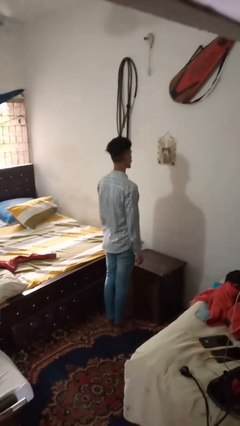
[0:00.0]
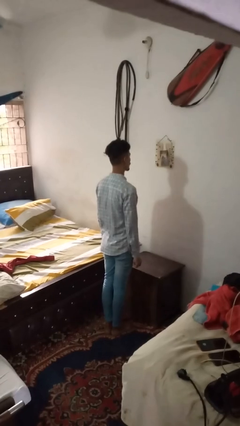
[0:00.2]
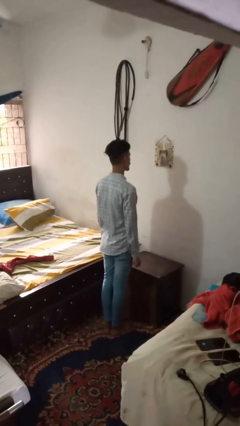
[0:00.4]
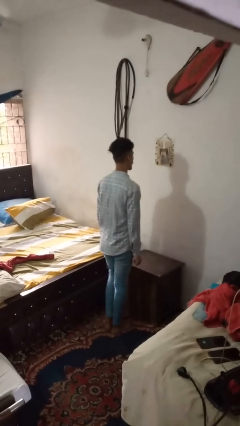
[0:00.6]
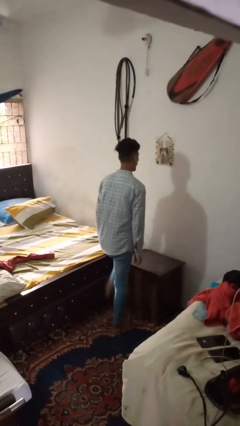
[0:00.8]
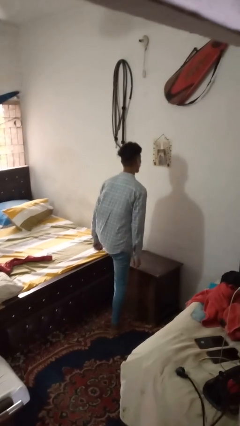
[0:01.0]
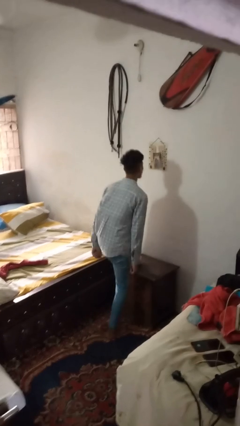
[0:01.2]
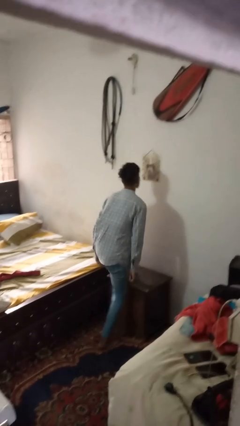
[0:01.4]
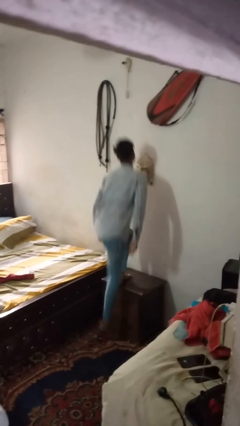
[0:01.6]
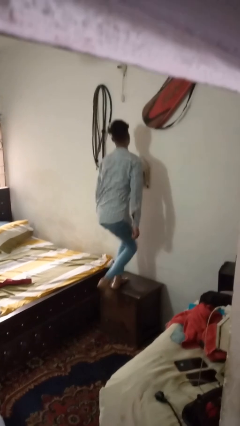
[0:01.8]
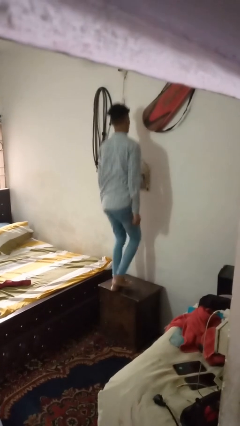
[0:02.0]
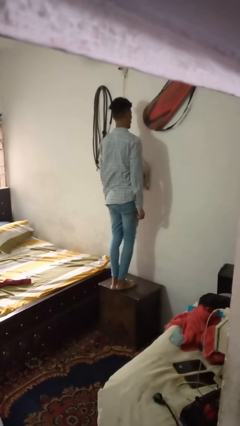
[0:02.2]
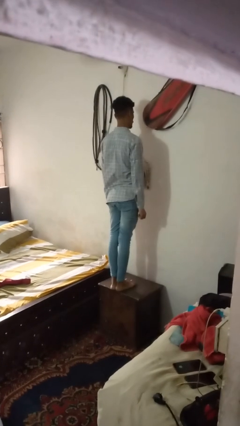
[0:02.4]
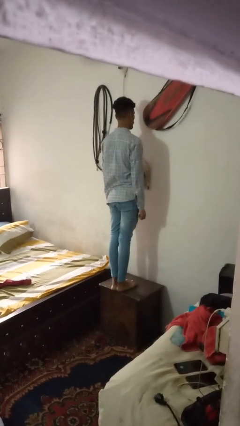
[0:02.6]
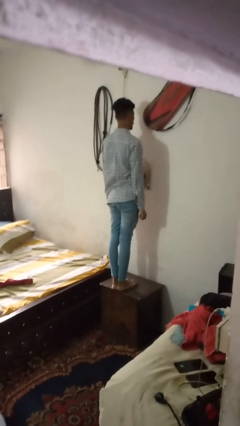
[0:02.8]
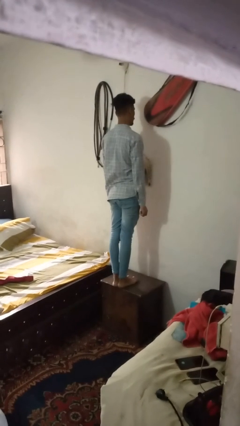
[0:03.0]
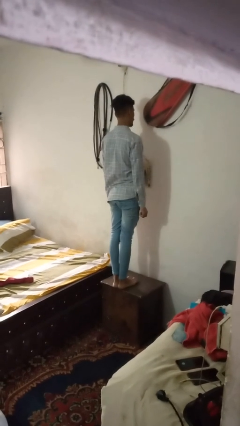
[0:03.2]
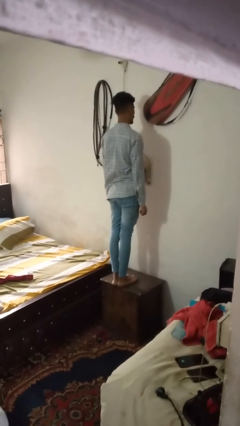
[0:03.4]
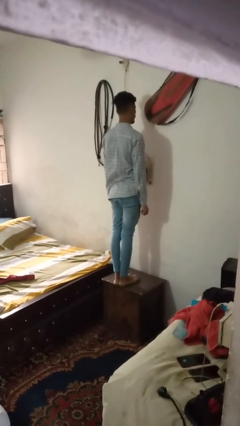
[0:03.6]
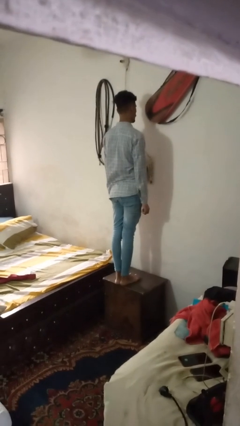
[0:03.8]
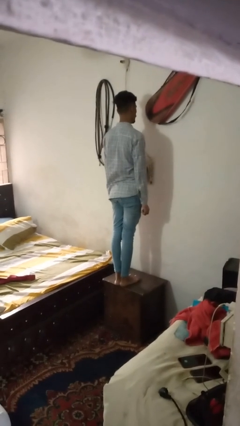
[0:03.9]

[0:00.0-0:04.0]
person climbs on table

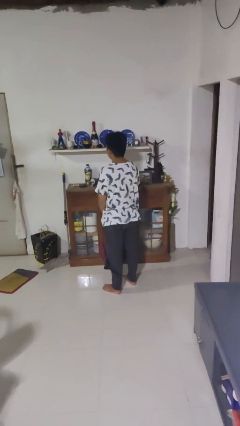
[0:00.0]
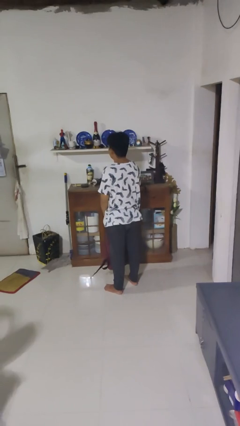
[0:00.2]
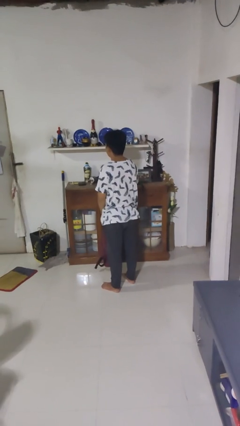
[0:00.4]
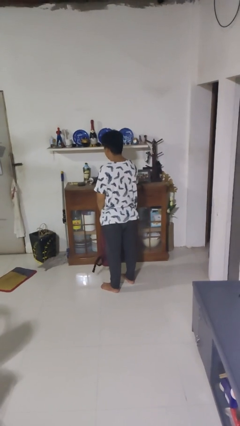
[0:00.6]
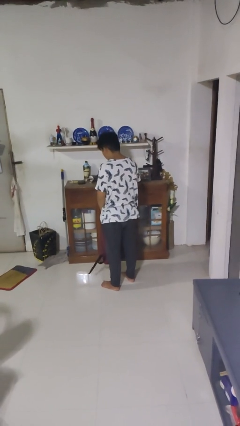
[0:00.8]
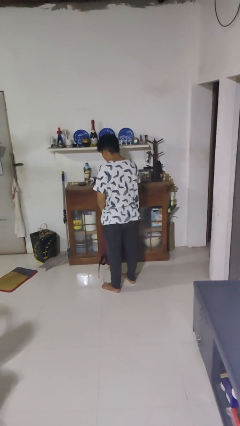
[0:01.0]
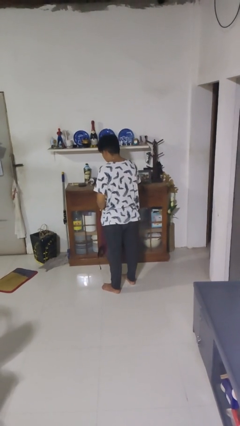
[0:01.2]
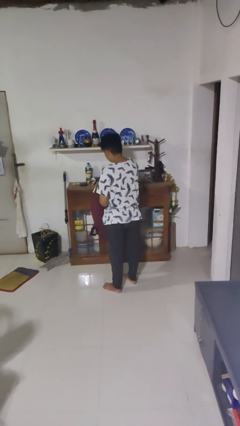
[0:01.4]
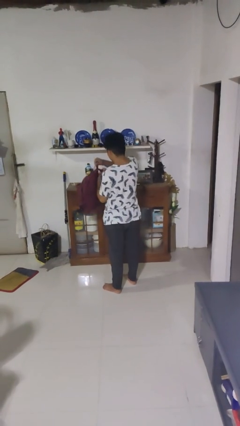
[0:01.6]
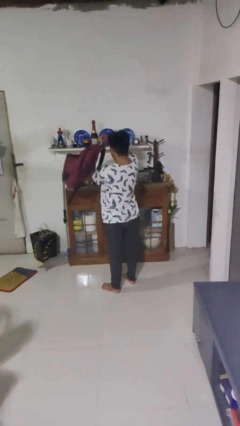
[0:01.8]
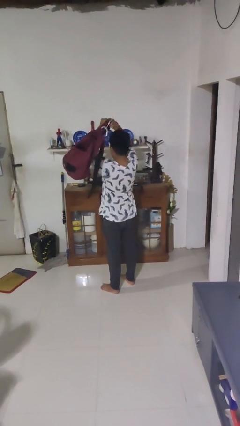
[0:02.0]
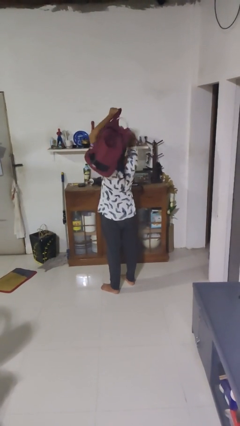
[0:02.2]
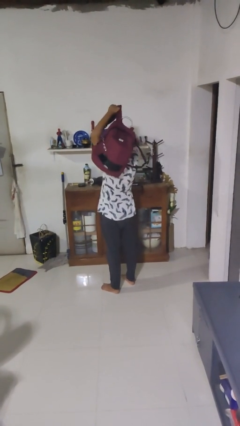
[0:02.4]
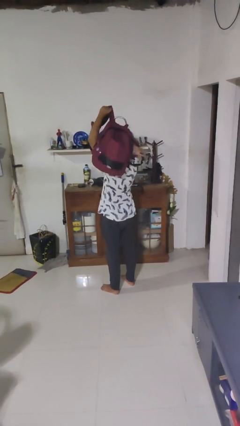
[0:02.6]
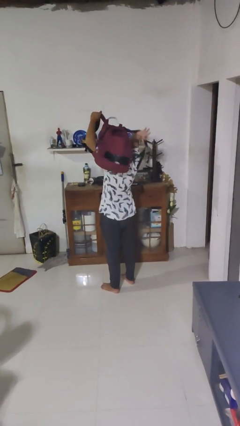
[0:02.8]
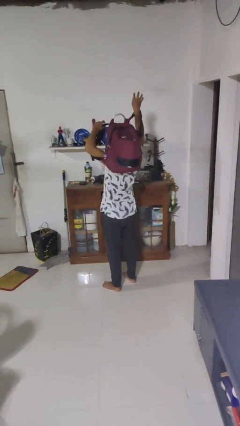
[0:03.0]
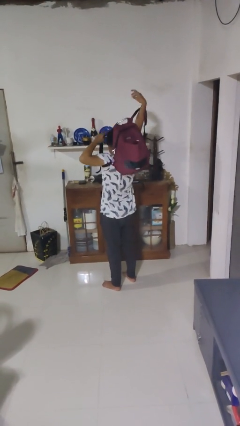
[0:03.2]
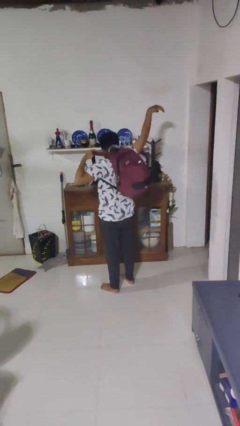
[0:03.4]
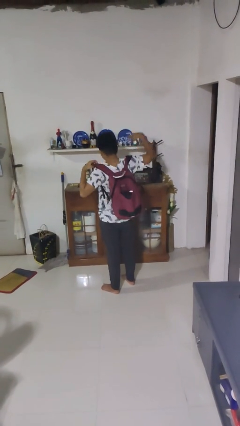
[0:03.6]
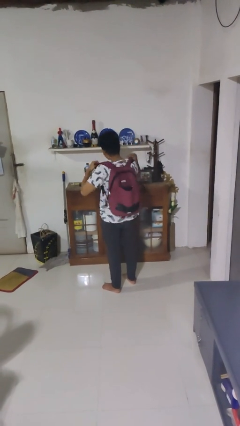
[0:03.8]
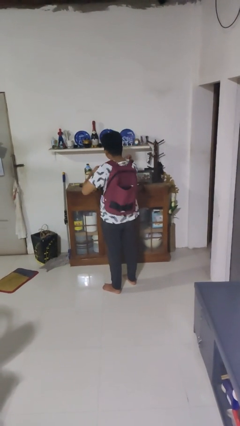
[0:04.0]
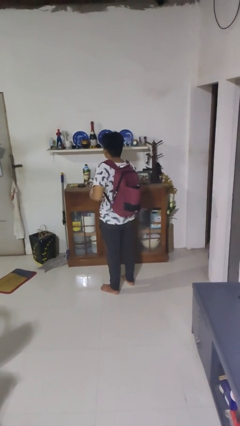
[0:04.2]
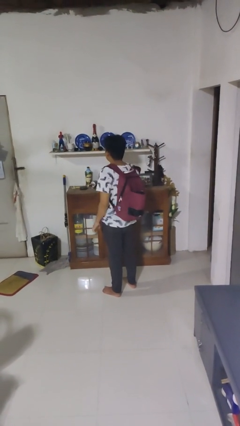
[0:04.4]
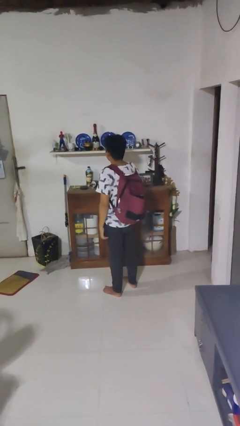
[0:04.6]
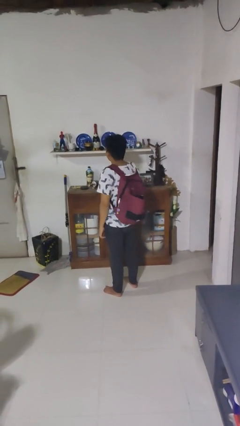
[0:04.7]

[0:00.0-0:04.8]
person puts on backpack

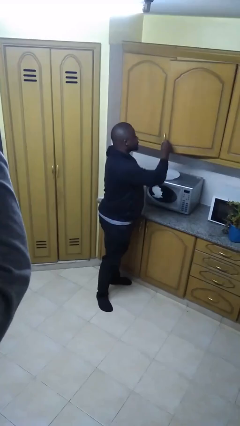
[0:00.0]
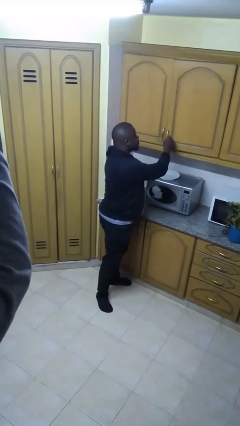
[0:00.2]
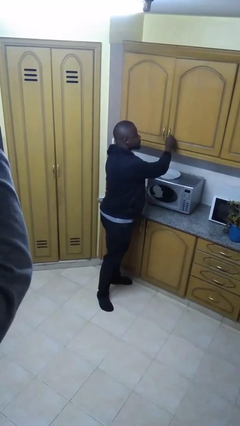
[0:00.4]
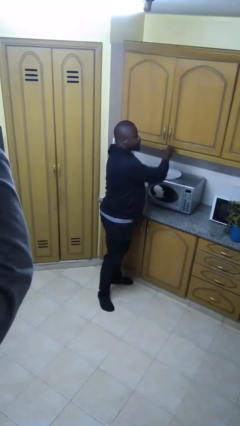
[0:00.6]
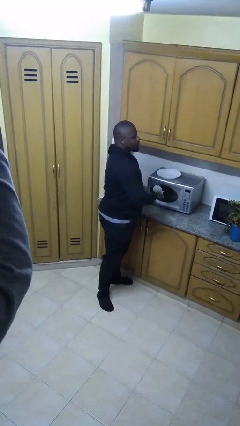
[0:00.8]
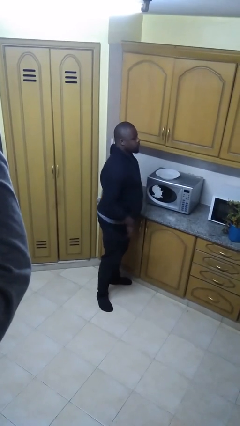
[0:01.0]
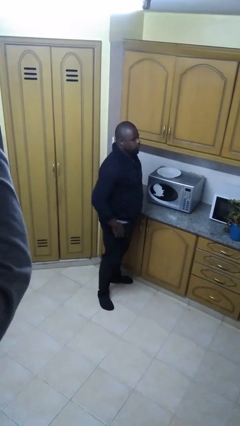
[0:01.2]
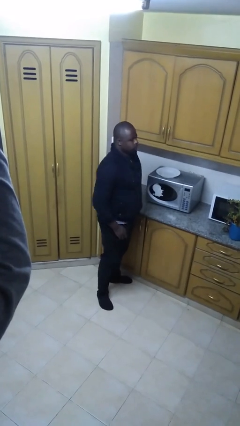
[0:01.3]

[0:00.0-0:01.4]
person closes cabinet

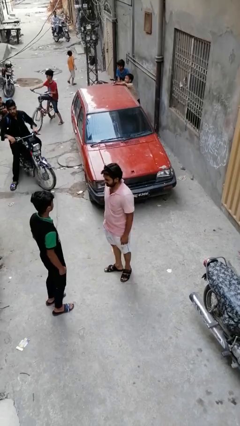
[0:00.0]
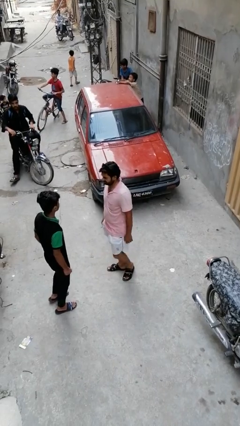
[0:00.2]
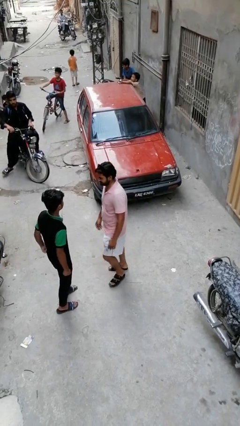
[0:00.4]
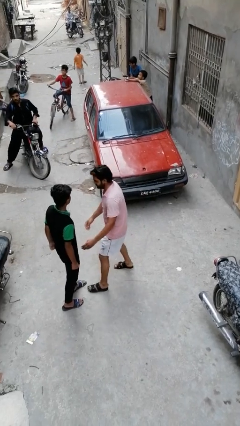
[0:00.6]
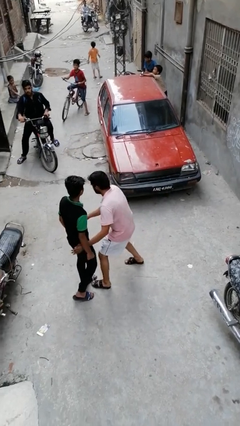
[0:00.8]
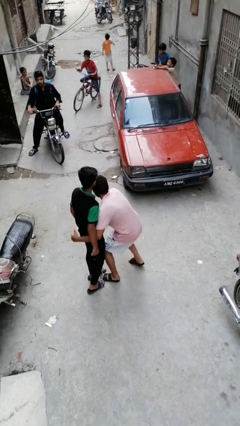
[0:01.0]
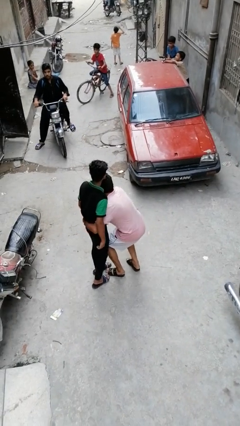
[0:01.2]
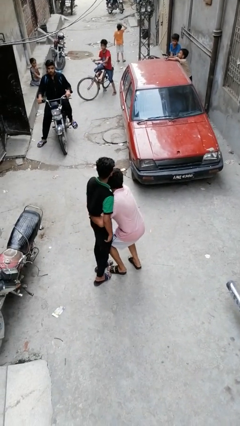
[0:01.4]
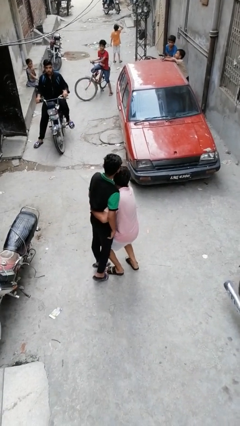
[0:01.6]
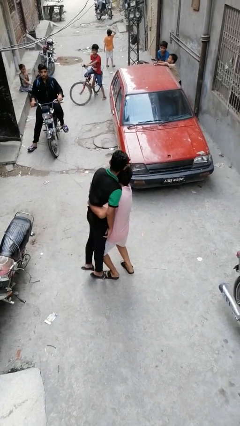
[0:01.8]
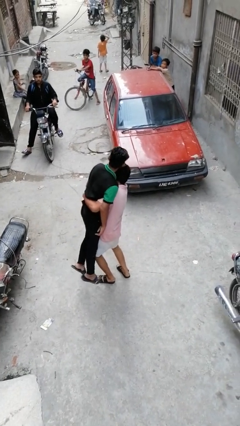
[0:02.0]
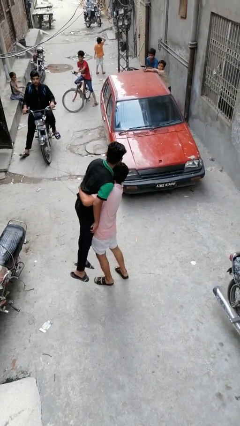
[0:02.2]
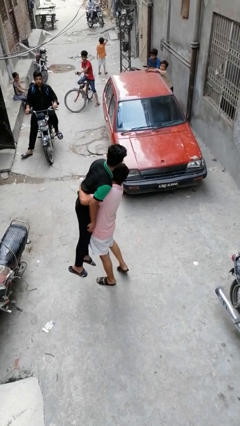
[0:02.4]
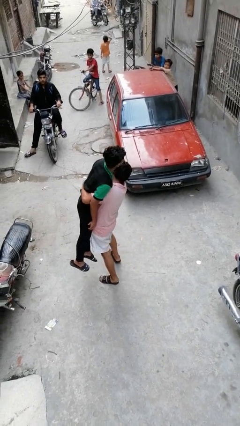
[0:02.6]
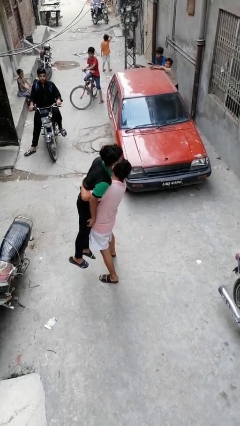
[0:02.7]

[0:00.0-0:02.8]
person picks up person

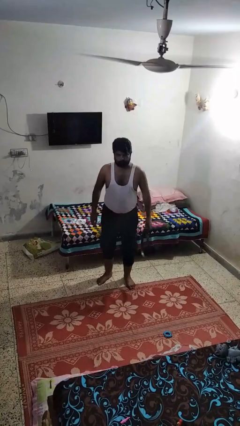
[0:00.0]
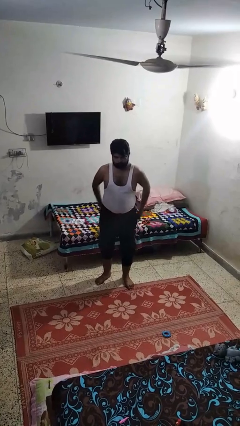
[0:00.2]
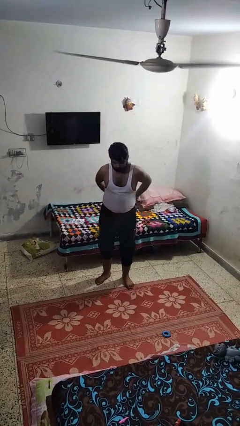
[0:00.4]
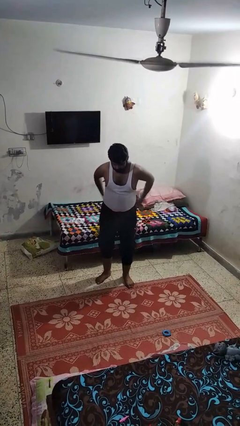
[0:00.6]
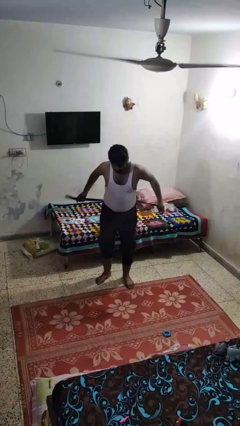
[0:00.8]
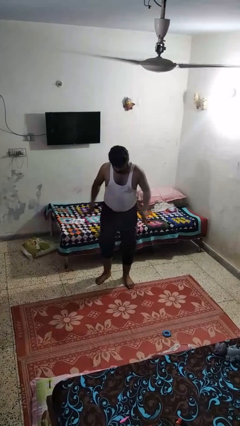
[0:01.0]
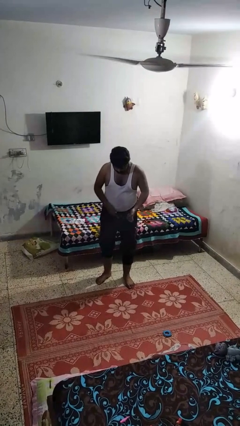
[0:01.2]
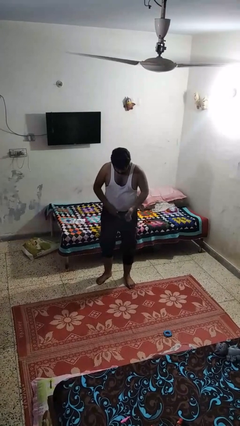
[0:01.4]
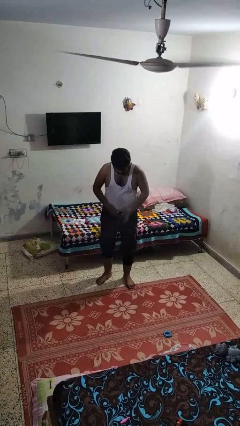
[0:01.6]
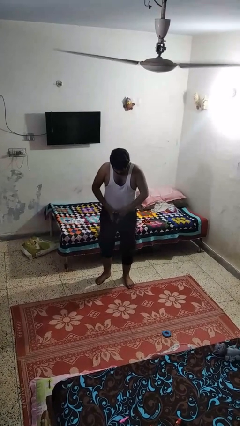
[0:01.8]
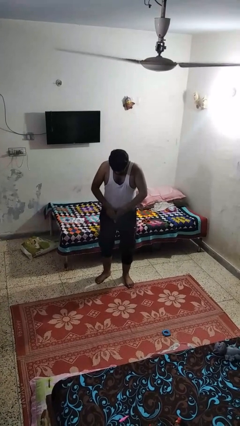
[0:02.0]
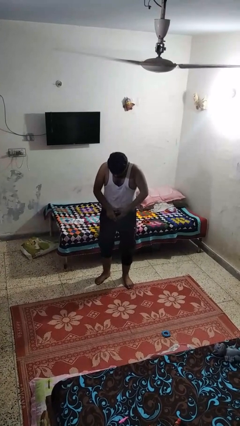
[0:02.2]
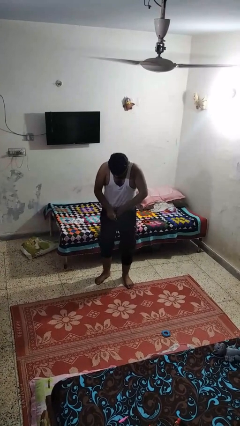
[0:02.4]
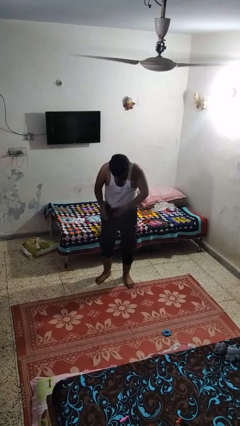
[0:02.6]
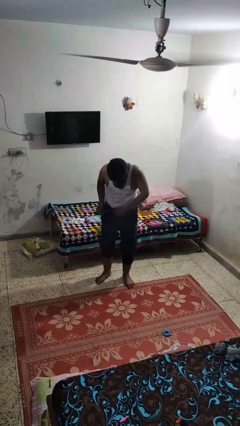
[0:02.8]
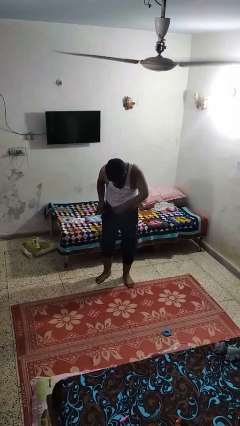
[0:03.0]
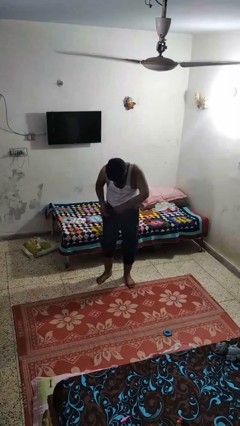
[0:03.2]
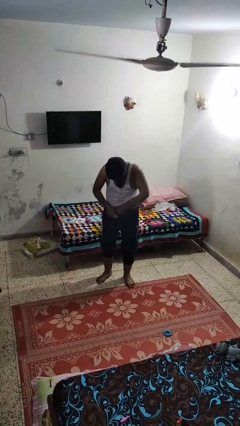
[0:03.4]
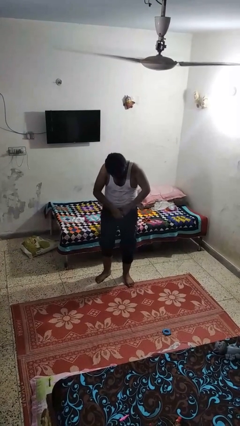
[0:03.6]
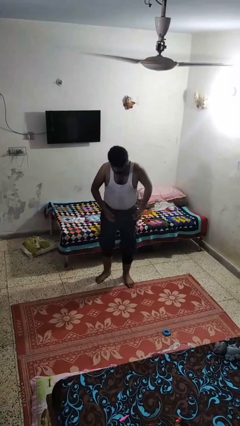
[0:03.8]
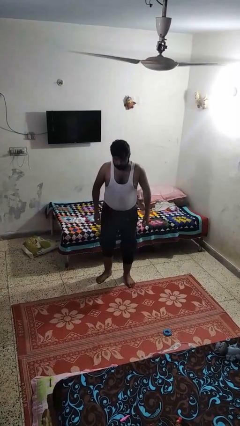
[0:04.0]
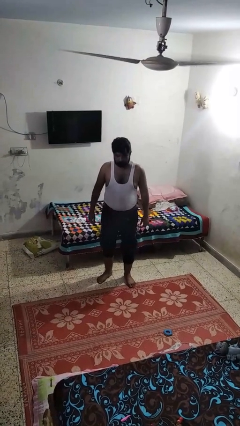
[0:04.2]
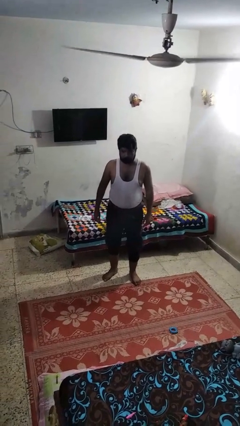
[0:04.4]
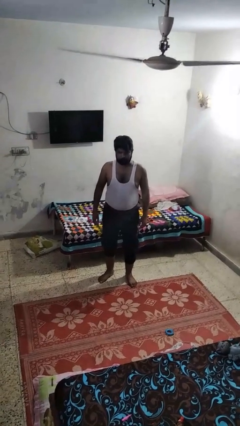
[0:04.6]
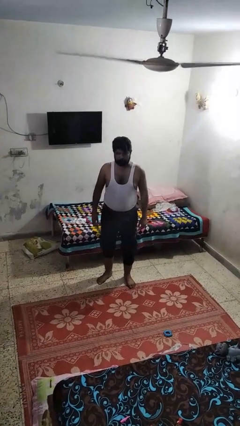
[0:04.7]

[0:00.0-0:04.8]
person puts on belt
